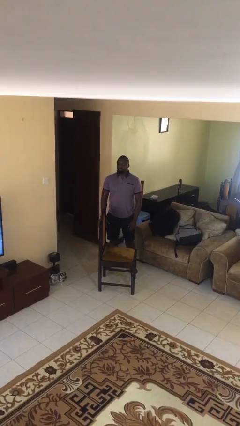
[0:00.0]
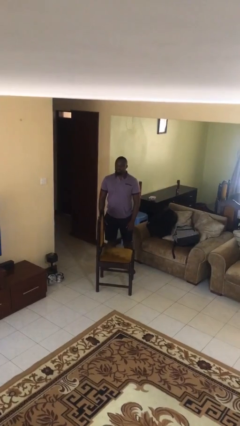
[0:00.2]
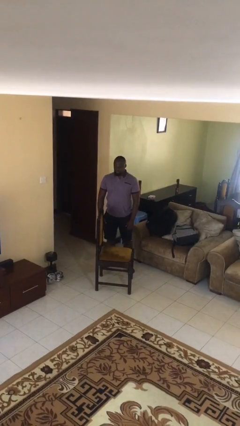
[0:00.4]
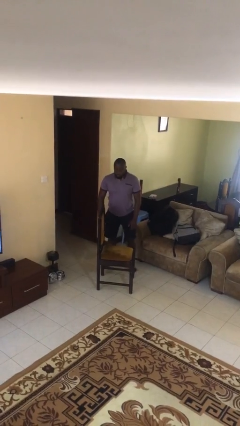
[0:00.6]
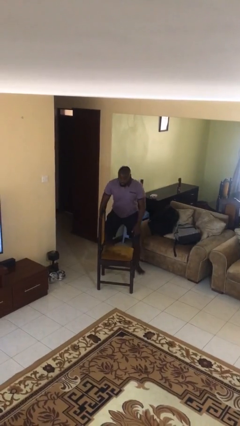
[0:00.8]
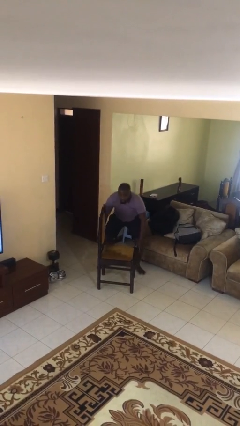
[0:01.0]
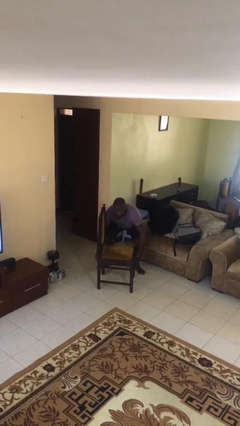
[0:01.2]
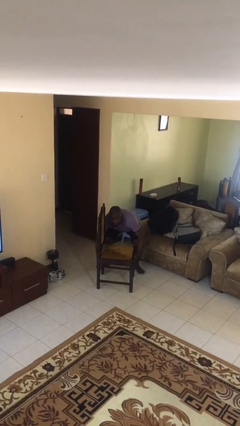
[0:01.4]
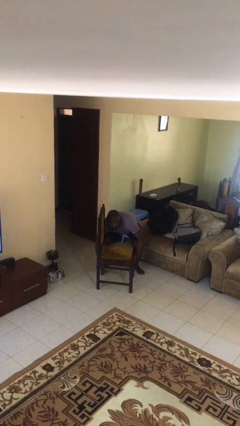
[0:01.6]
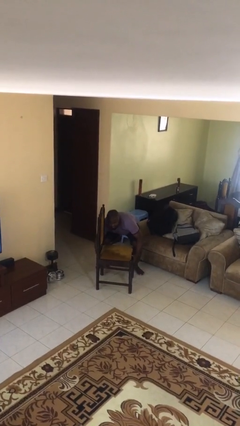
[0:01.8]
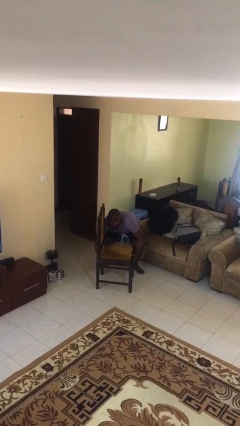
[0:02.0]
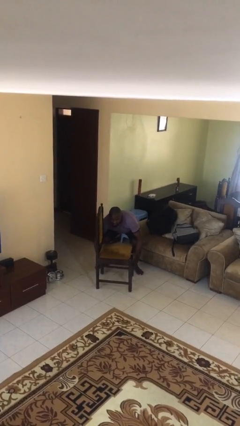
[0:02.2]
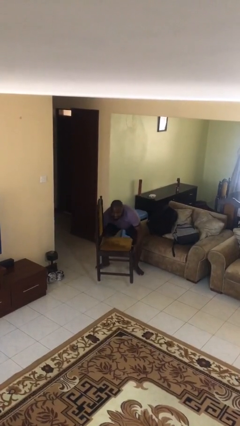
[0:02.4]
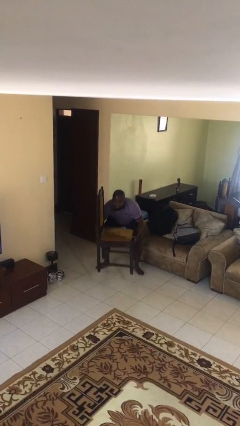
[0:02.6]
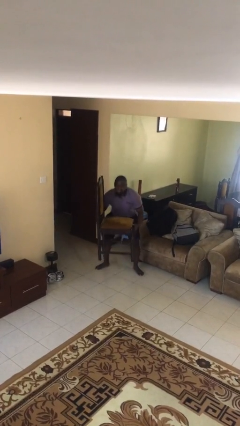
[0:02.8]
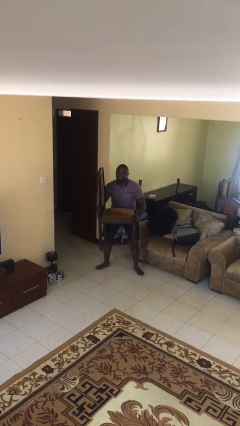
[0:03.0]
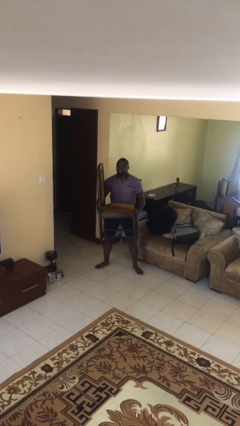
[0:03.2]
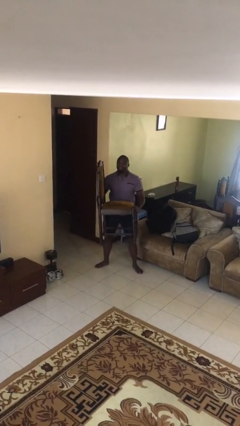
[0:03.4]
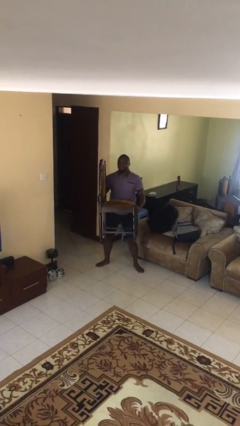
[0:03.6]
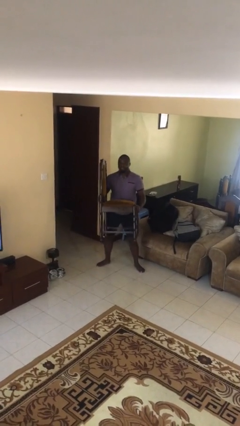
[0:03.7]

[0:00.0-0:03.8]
person picks up object from floor

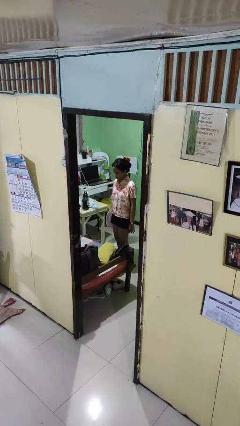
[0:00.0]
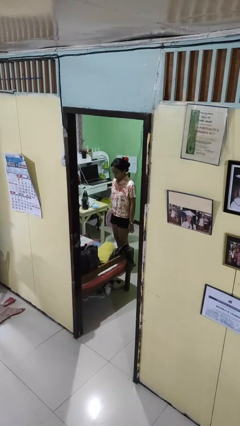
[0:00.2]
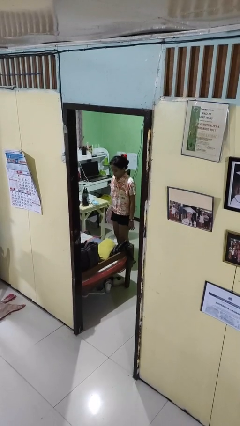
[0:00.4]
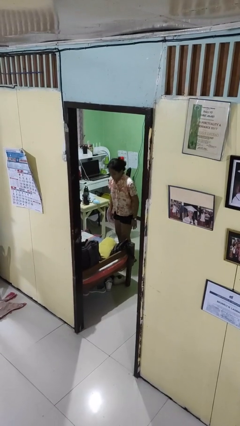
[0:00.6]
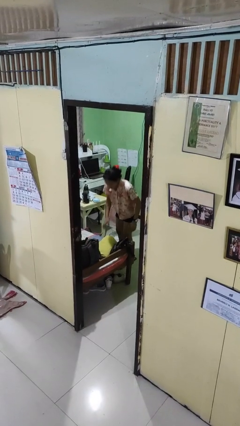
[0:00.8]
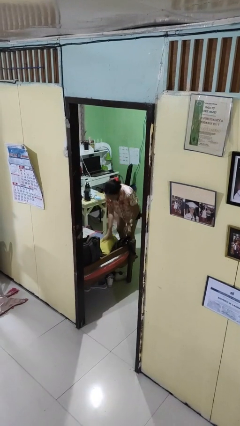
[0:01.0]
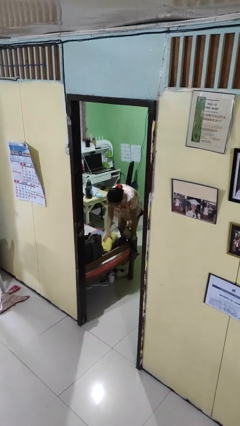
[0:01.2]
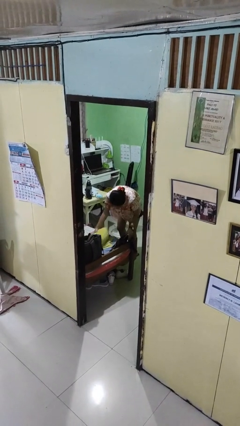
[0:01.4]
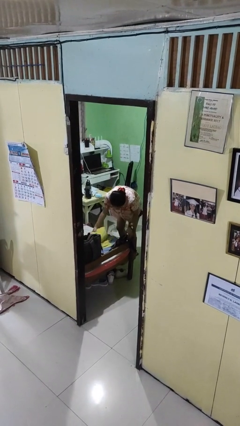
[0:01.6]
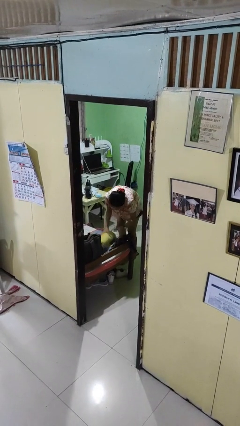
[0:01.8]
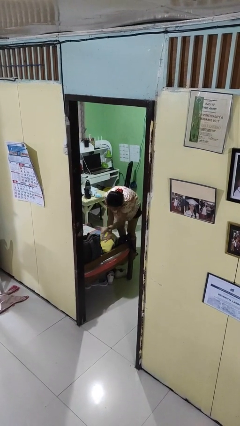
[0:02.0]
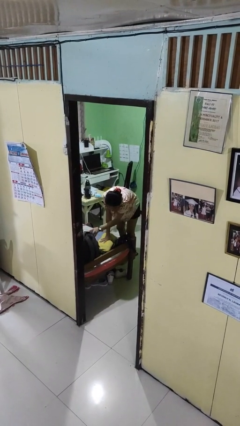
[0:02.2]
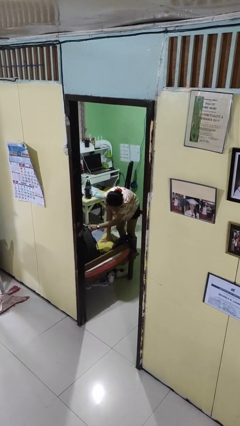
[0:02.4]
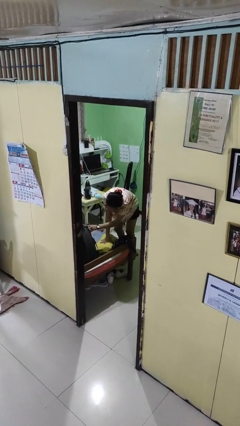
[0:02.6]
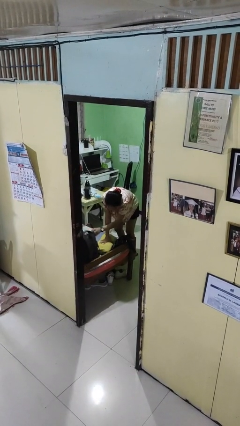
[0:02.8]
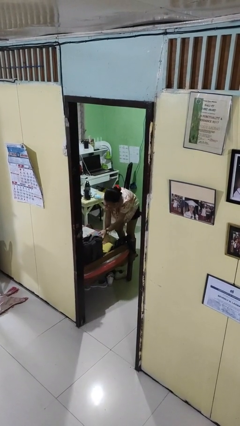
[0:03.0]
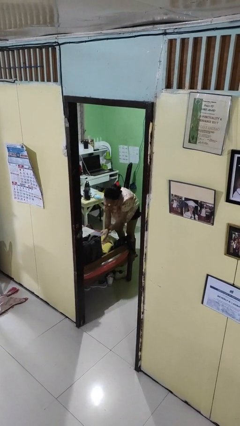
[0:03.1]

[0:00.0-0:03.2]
person searches under bed

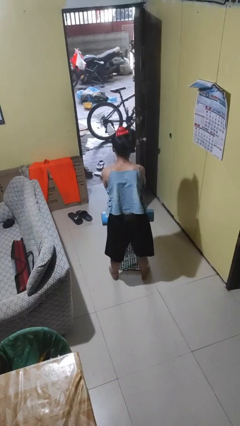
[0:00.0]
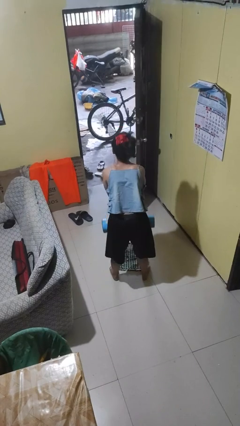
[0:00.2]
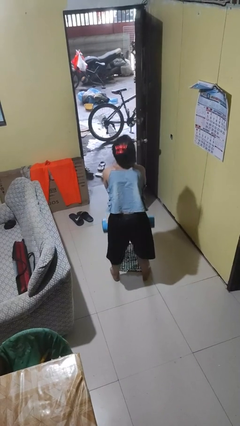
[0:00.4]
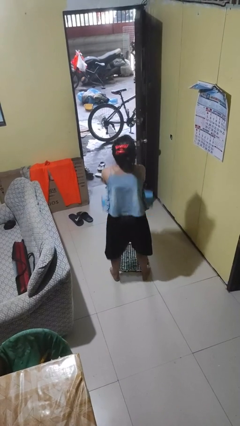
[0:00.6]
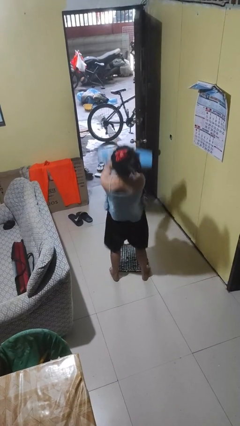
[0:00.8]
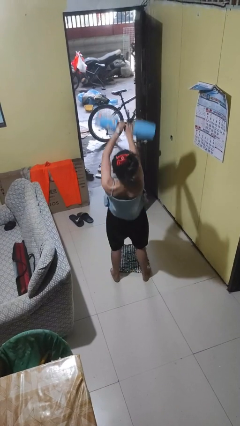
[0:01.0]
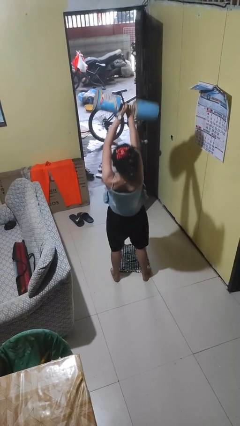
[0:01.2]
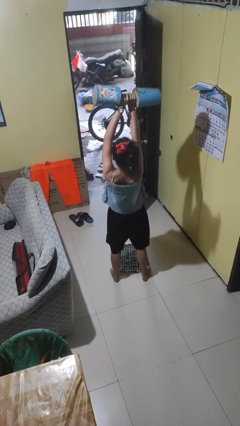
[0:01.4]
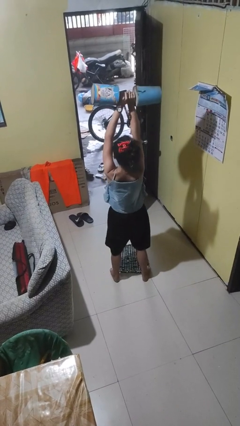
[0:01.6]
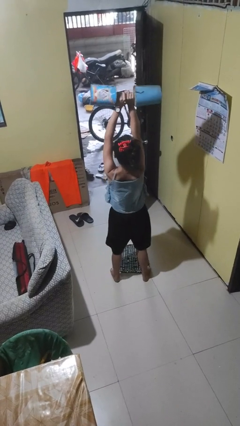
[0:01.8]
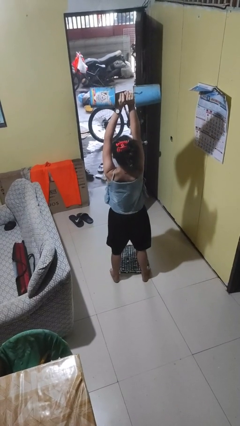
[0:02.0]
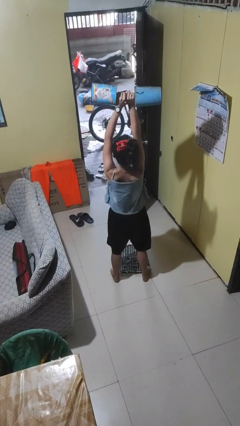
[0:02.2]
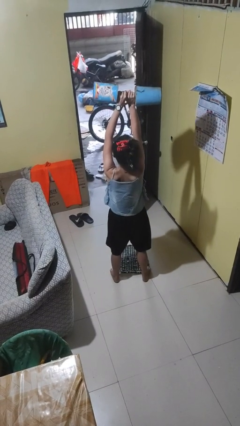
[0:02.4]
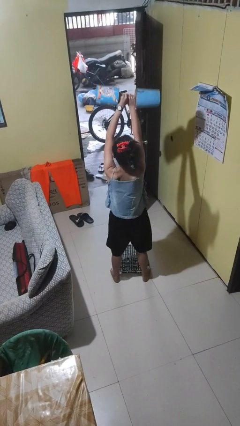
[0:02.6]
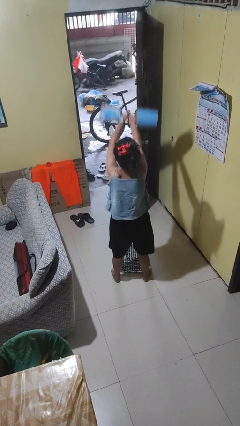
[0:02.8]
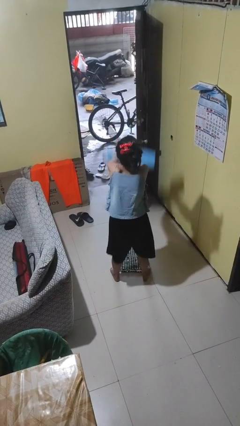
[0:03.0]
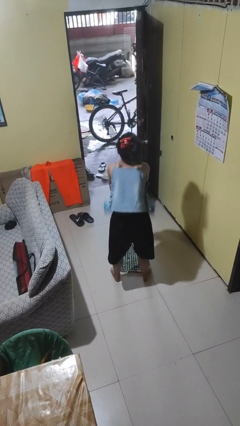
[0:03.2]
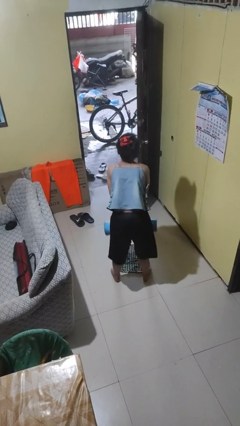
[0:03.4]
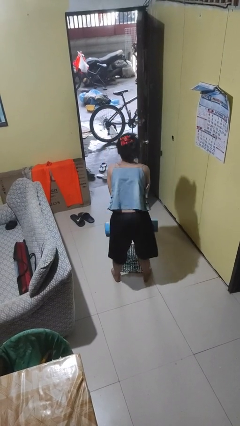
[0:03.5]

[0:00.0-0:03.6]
person lifts dumbbells

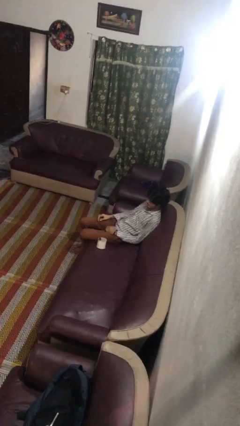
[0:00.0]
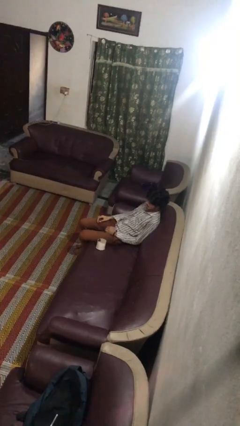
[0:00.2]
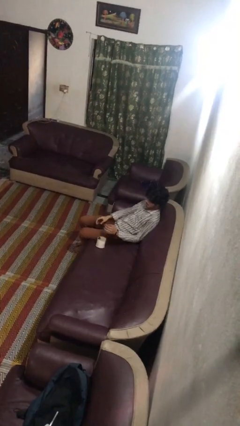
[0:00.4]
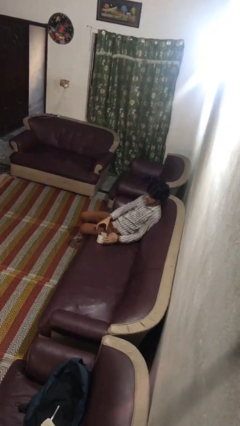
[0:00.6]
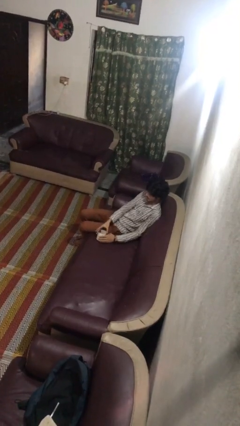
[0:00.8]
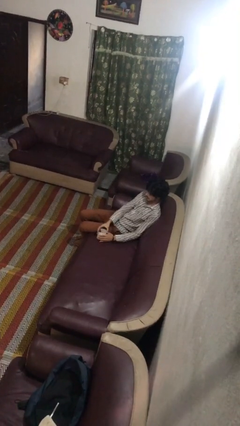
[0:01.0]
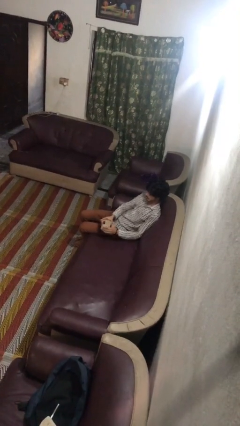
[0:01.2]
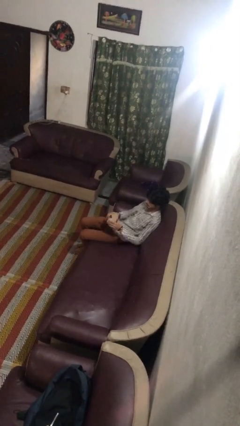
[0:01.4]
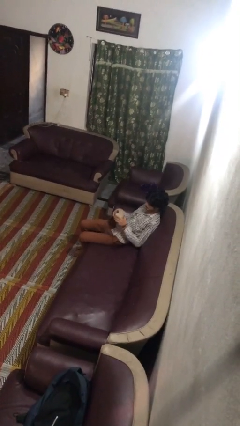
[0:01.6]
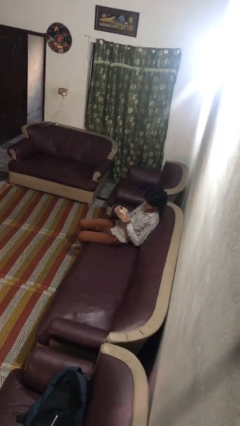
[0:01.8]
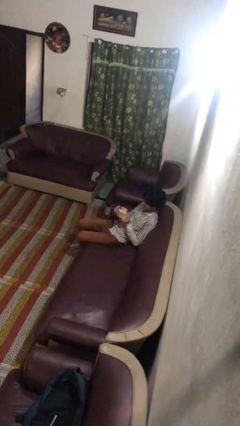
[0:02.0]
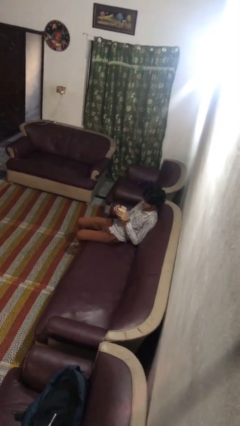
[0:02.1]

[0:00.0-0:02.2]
person picks up object from couch

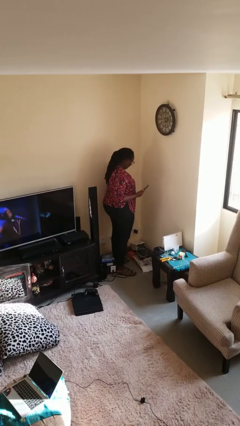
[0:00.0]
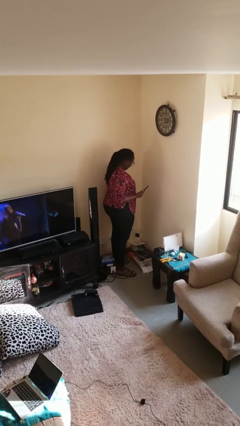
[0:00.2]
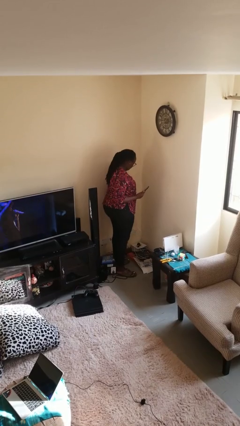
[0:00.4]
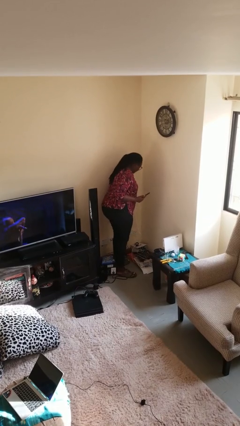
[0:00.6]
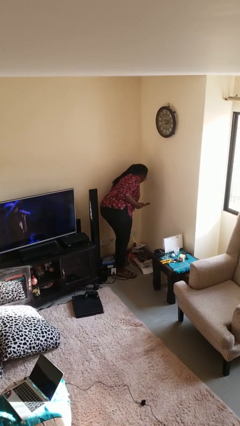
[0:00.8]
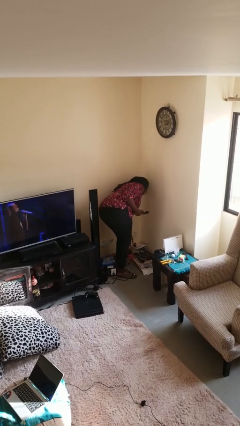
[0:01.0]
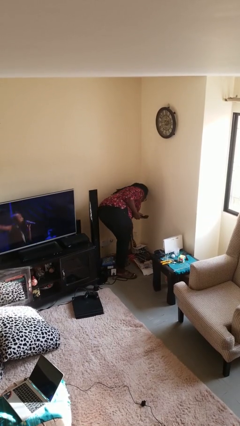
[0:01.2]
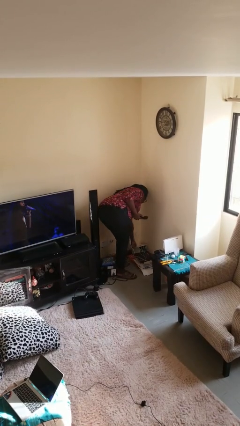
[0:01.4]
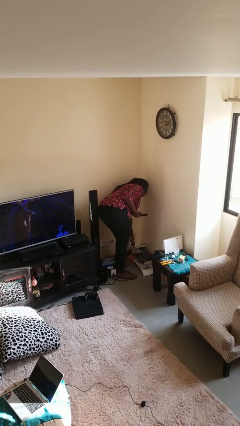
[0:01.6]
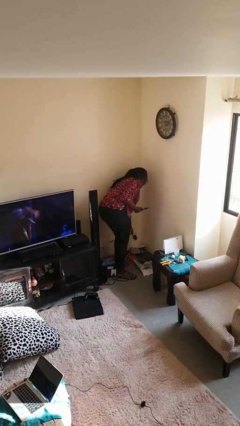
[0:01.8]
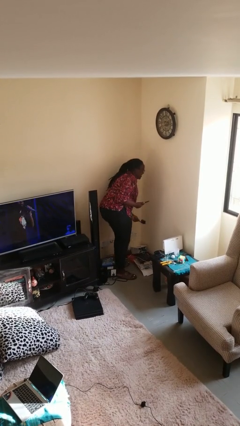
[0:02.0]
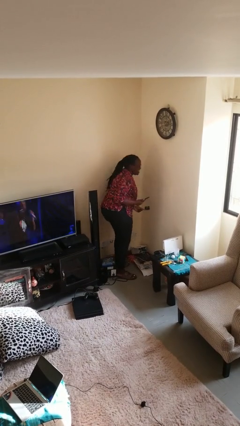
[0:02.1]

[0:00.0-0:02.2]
person unplugs from electrical socket

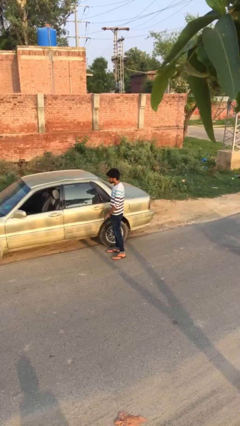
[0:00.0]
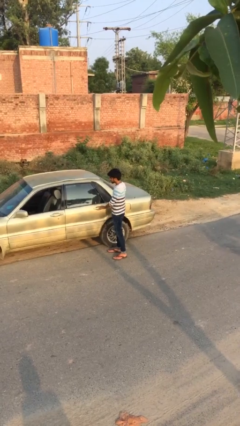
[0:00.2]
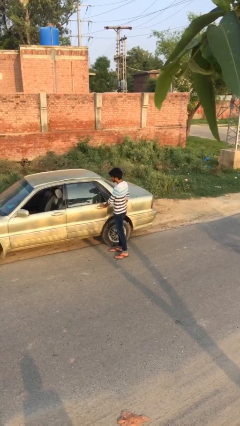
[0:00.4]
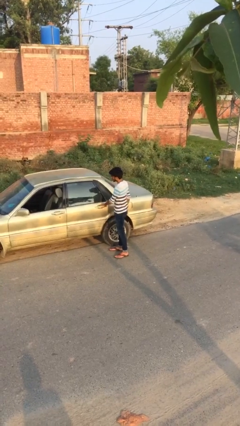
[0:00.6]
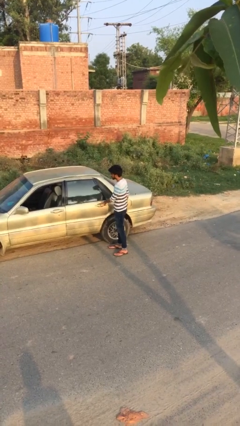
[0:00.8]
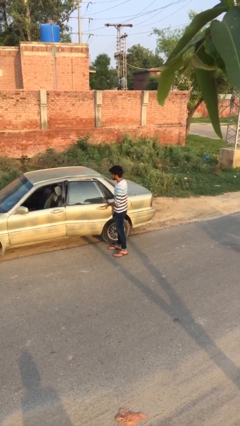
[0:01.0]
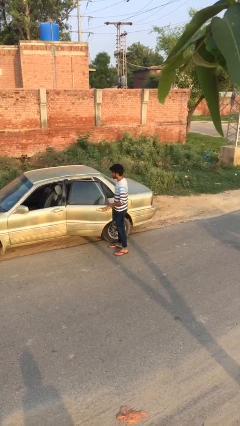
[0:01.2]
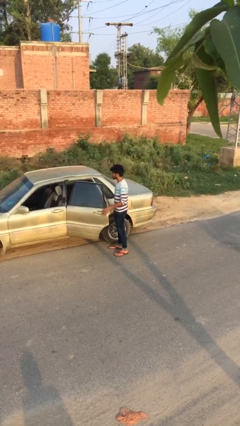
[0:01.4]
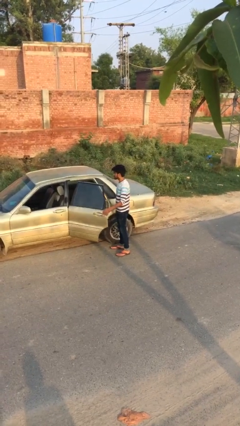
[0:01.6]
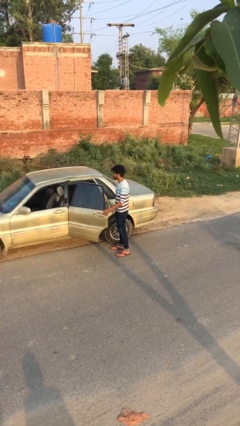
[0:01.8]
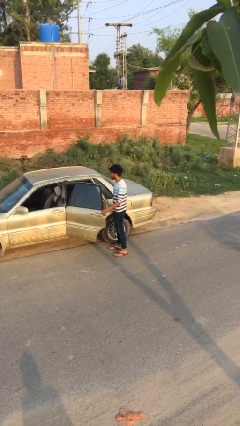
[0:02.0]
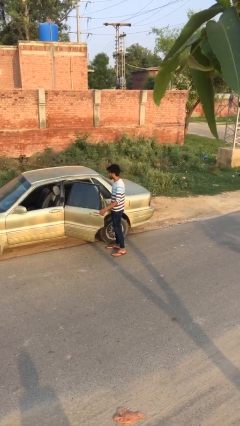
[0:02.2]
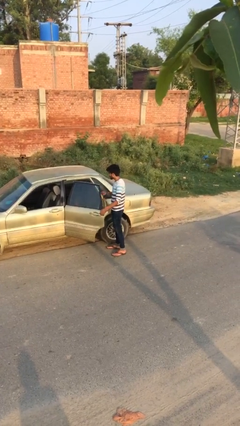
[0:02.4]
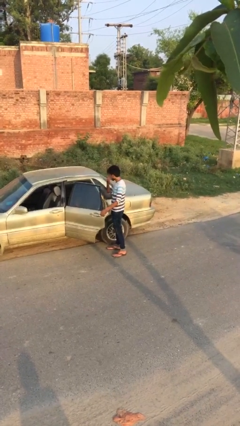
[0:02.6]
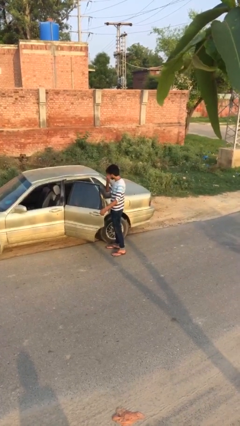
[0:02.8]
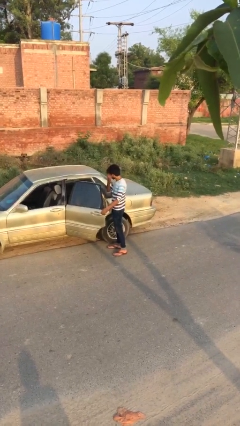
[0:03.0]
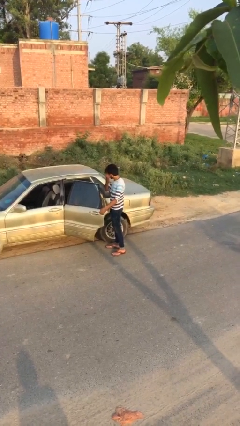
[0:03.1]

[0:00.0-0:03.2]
person opens car door
